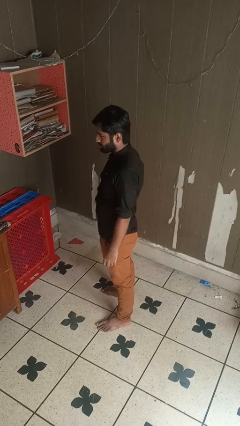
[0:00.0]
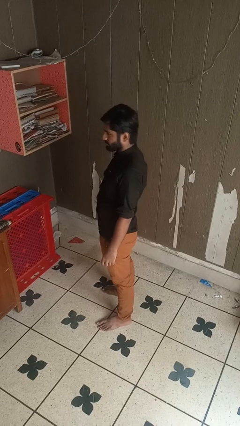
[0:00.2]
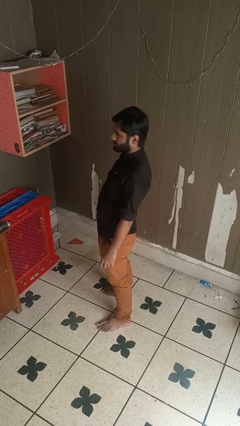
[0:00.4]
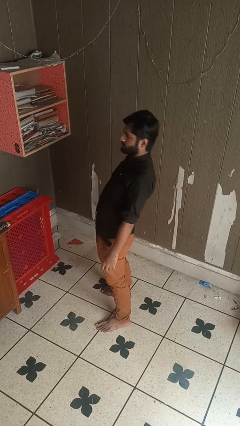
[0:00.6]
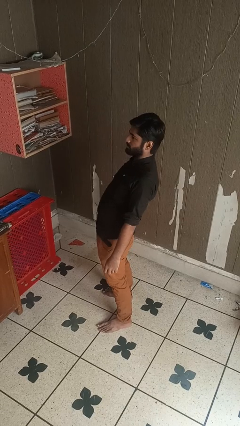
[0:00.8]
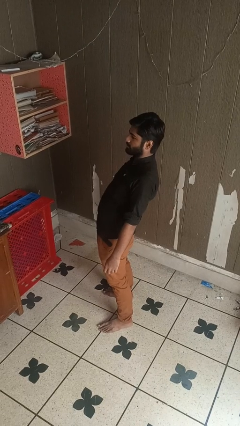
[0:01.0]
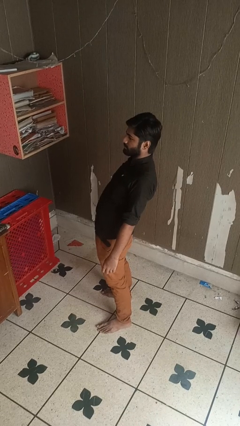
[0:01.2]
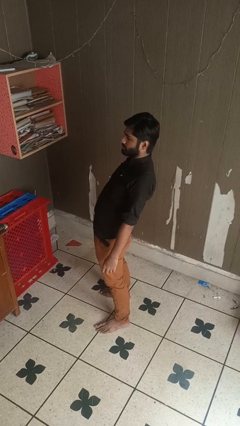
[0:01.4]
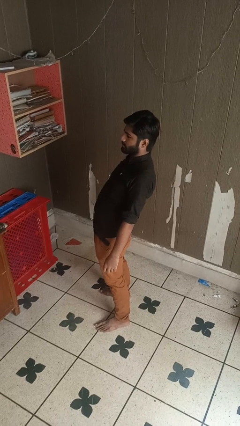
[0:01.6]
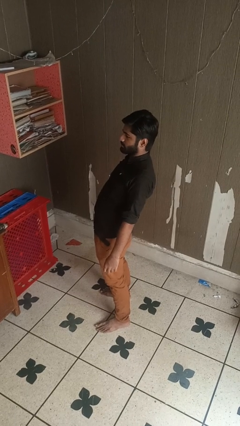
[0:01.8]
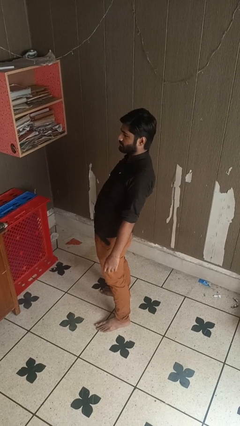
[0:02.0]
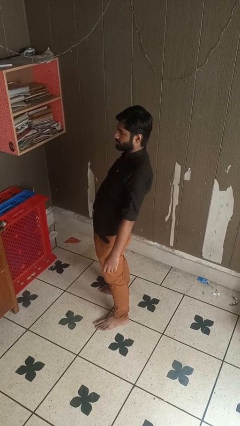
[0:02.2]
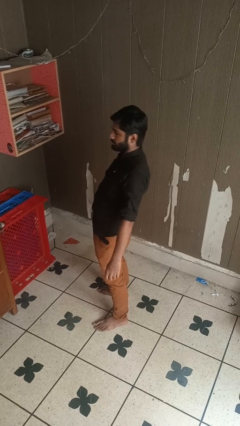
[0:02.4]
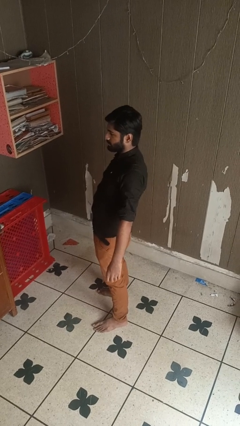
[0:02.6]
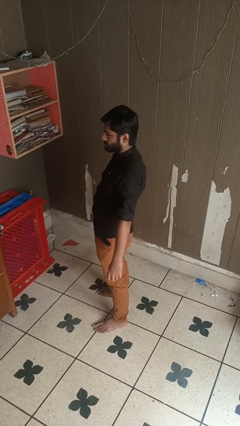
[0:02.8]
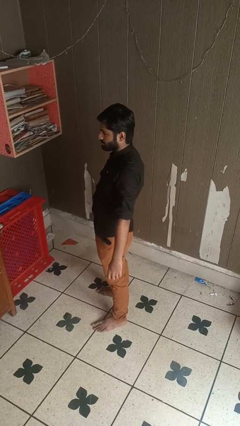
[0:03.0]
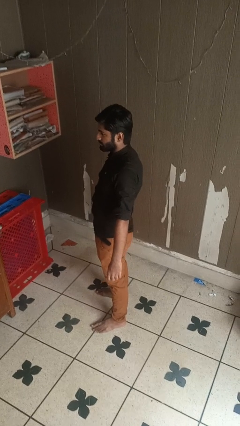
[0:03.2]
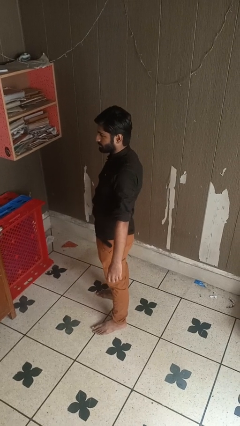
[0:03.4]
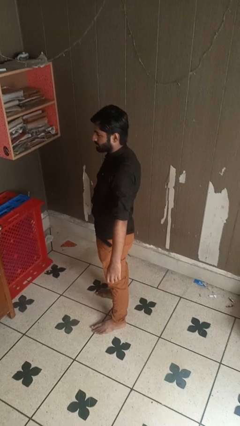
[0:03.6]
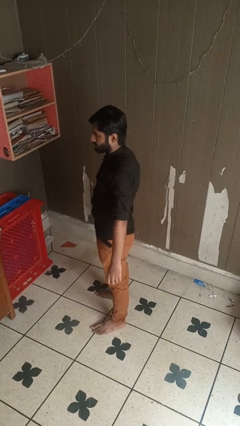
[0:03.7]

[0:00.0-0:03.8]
person stretches back

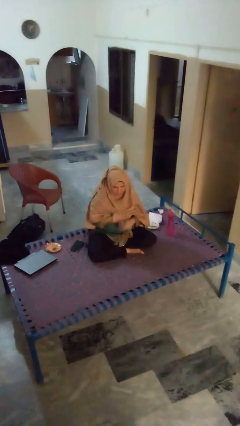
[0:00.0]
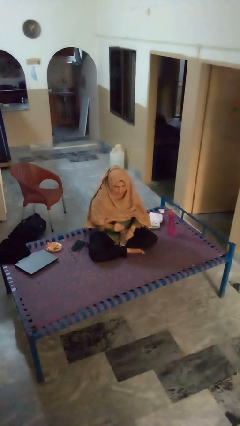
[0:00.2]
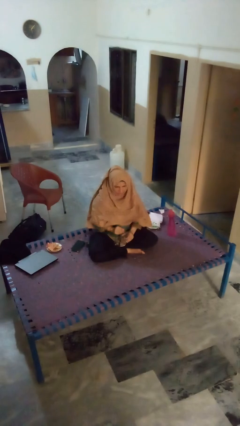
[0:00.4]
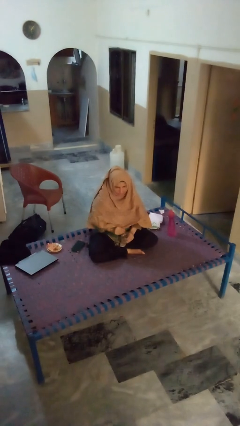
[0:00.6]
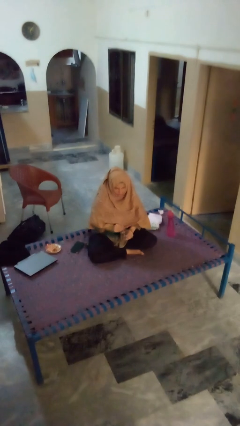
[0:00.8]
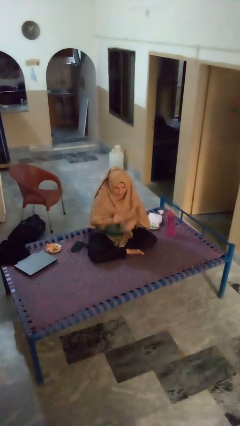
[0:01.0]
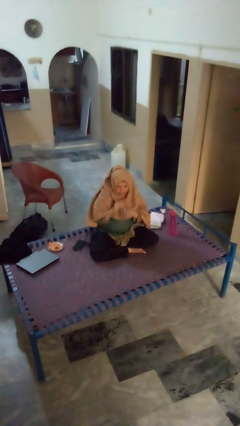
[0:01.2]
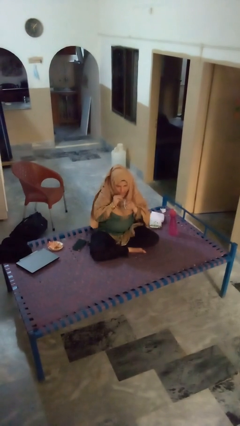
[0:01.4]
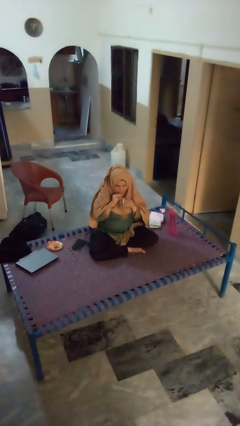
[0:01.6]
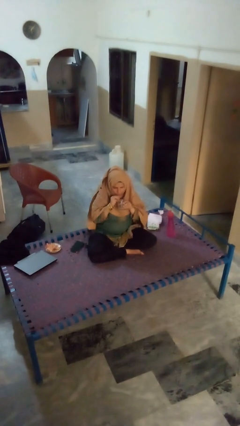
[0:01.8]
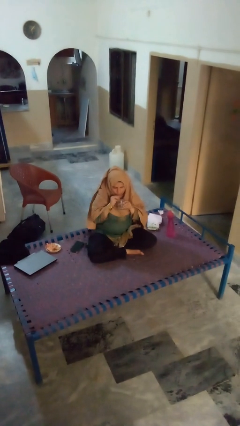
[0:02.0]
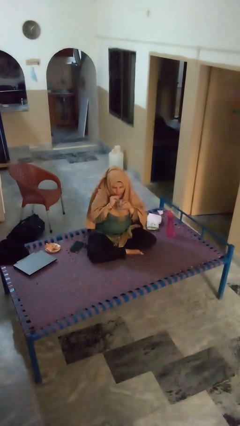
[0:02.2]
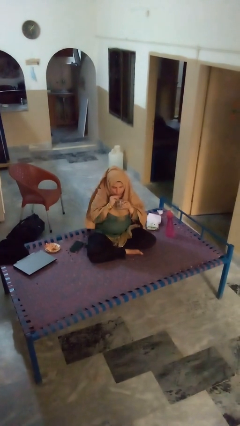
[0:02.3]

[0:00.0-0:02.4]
person drinks from straw

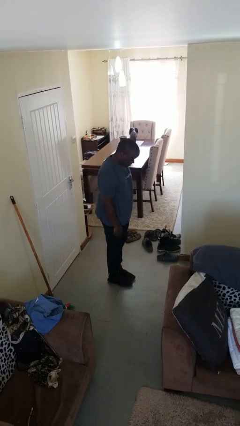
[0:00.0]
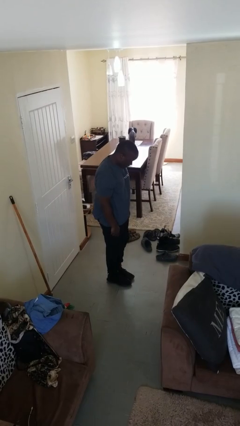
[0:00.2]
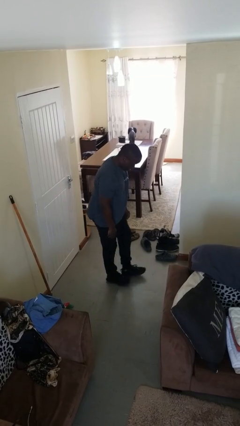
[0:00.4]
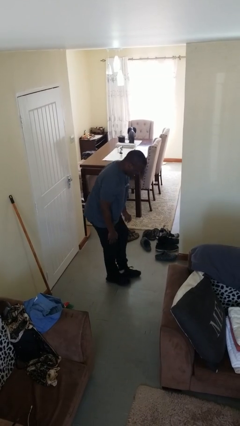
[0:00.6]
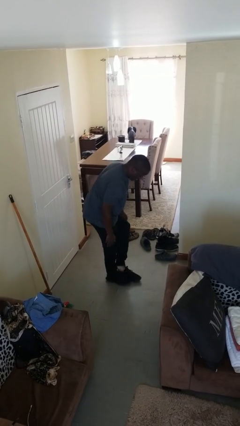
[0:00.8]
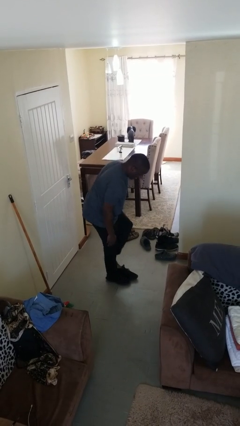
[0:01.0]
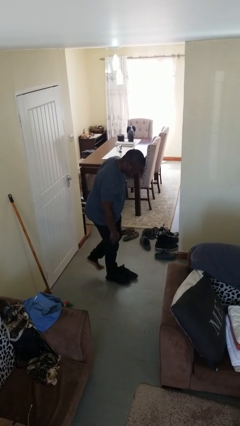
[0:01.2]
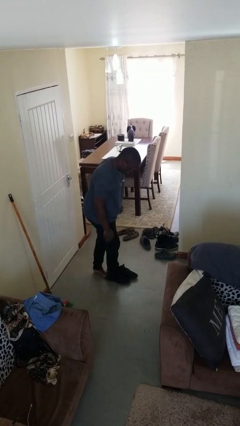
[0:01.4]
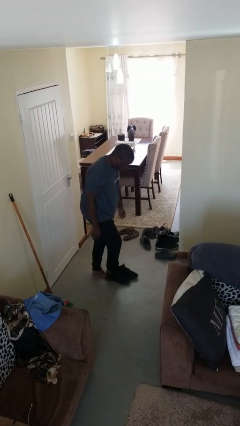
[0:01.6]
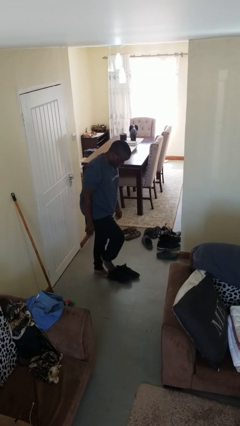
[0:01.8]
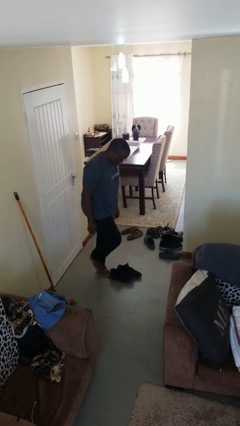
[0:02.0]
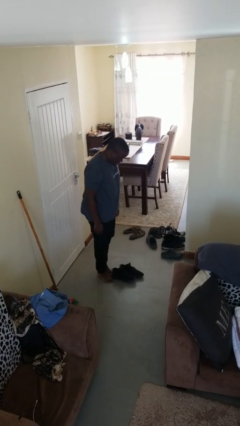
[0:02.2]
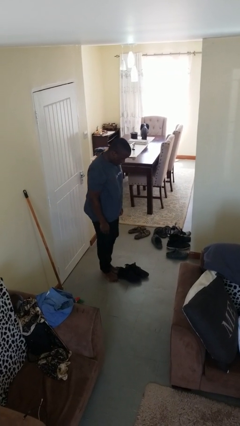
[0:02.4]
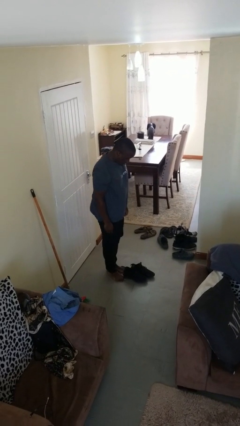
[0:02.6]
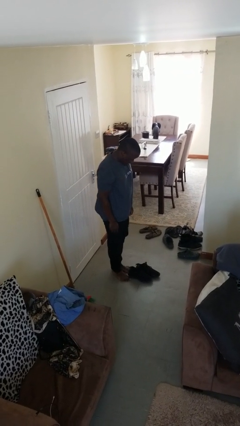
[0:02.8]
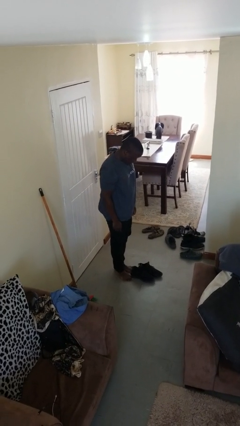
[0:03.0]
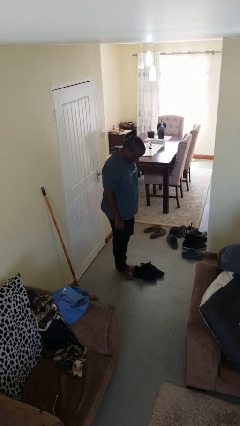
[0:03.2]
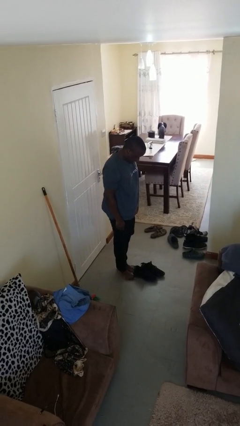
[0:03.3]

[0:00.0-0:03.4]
person takes off shoes

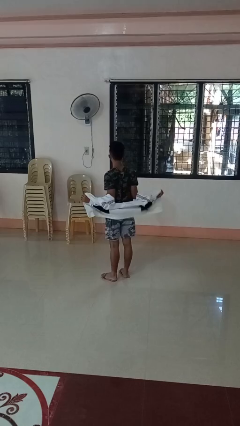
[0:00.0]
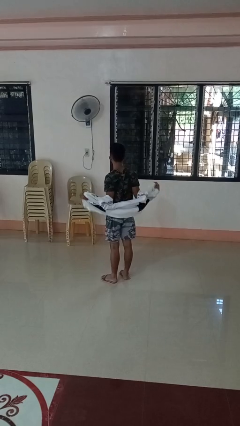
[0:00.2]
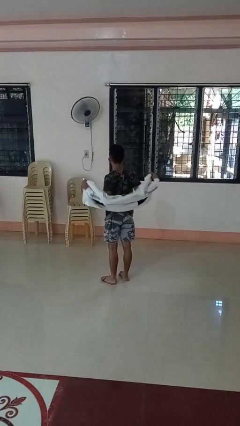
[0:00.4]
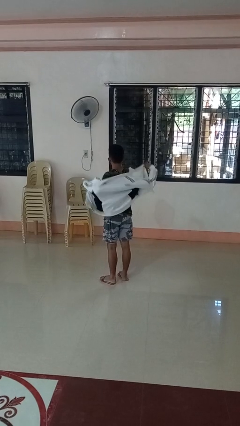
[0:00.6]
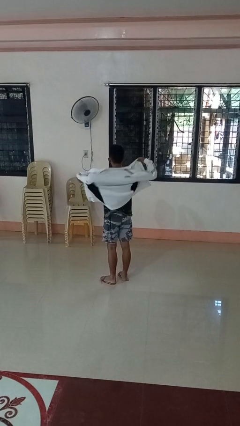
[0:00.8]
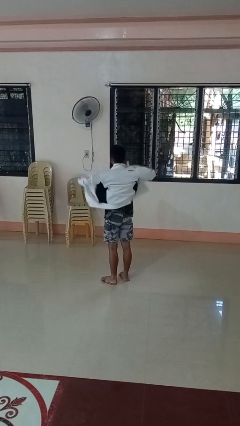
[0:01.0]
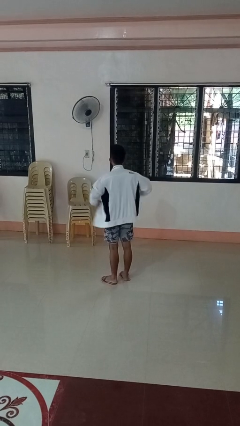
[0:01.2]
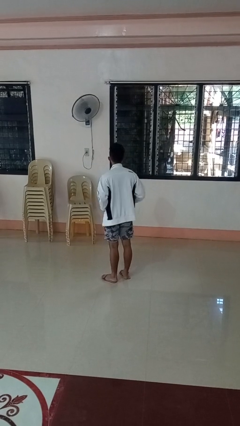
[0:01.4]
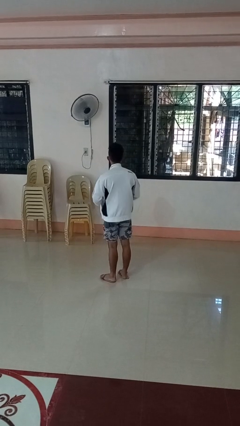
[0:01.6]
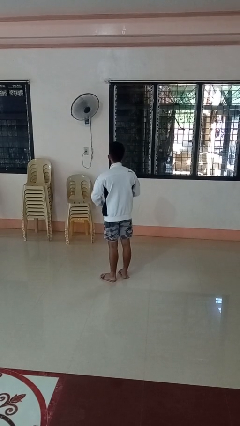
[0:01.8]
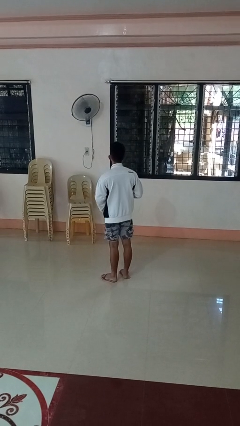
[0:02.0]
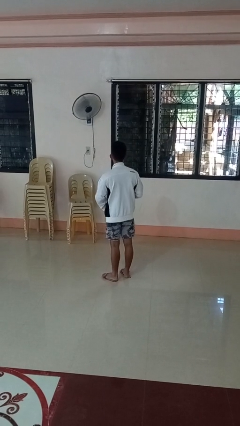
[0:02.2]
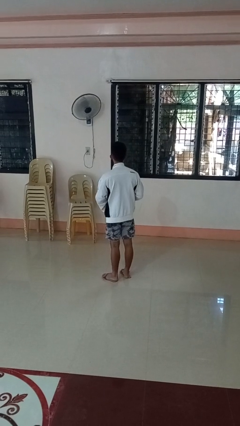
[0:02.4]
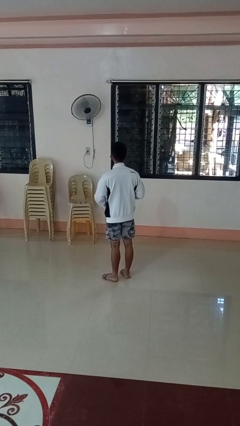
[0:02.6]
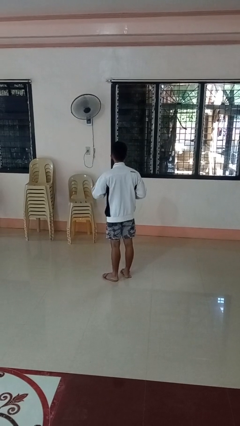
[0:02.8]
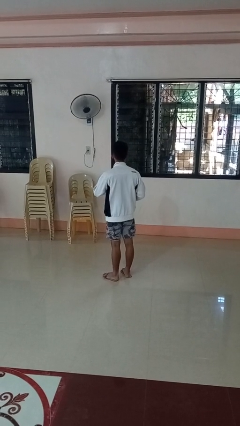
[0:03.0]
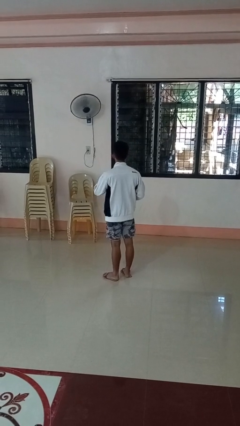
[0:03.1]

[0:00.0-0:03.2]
person puts on jacket

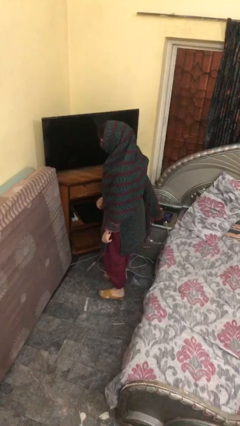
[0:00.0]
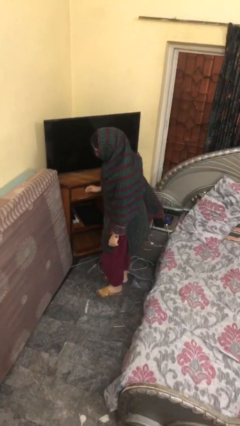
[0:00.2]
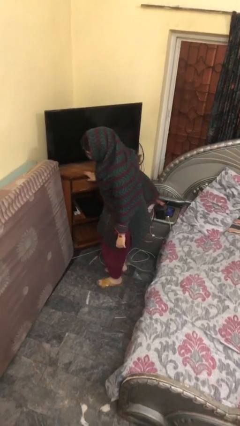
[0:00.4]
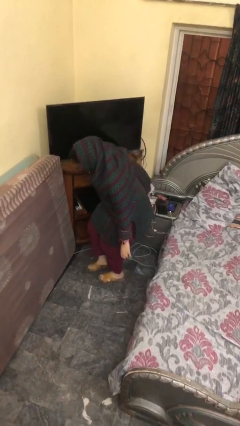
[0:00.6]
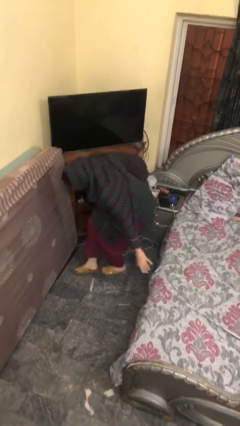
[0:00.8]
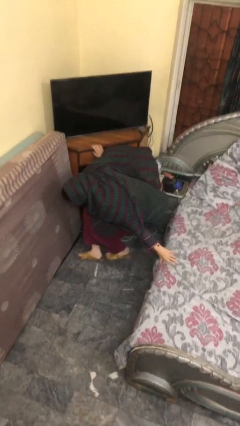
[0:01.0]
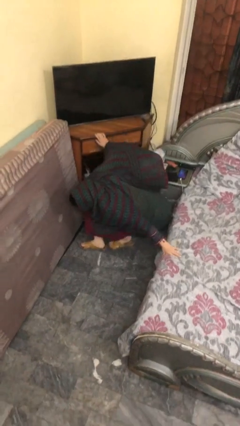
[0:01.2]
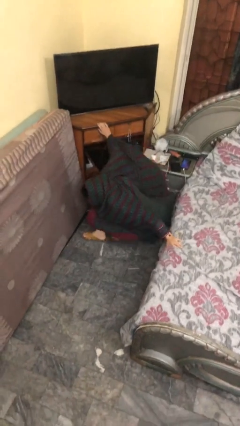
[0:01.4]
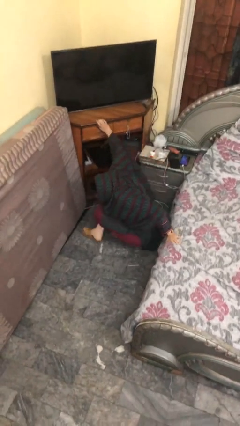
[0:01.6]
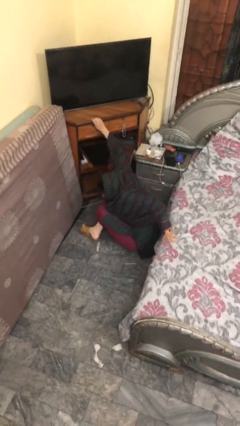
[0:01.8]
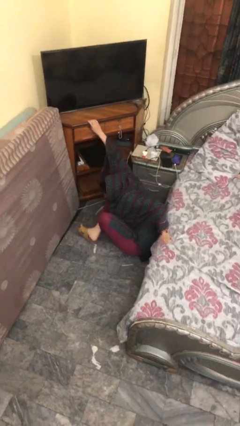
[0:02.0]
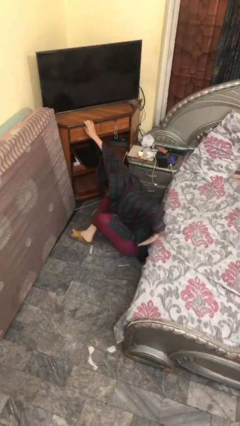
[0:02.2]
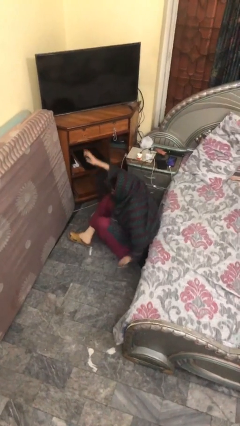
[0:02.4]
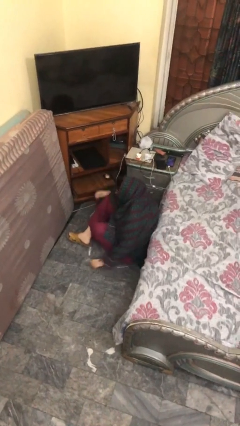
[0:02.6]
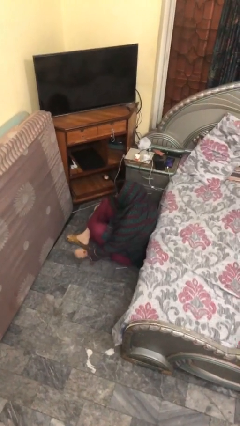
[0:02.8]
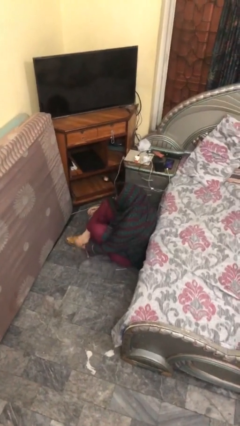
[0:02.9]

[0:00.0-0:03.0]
person sits crisscross

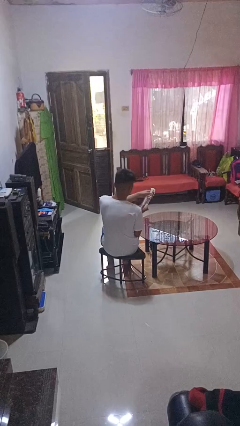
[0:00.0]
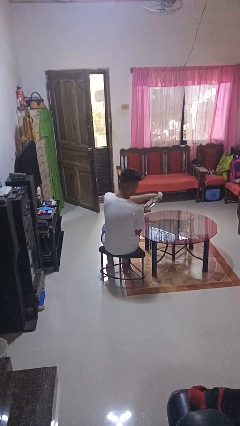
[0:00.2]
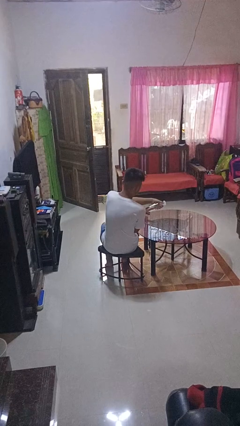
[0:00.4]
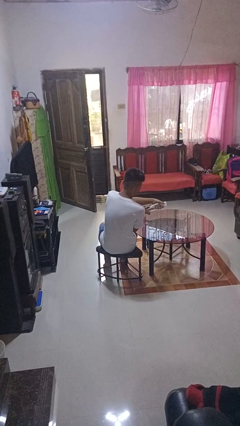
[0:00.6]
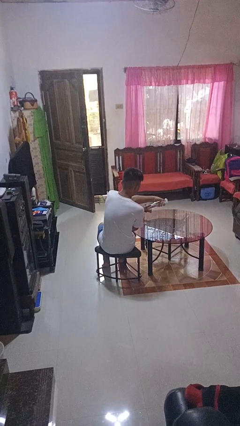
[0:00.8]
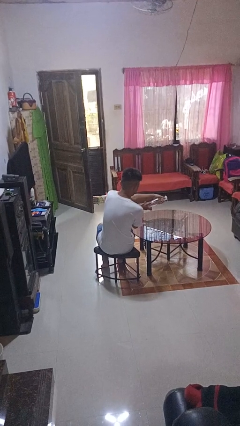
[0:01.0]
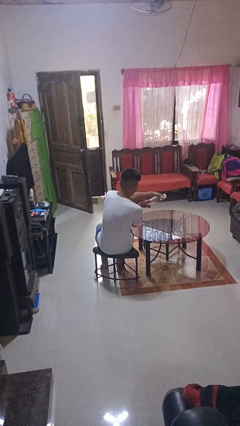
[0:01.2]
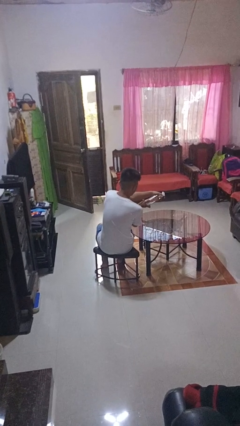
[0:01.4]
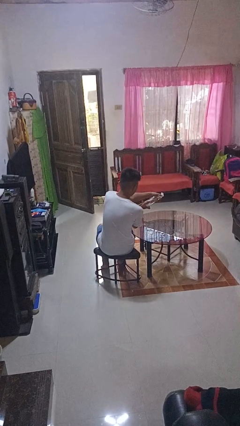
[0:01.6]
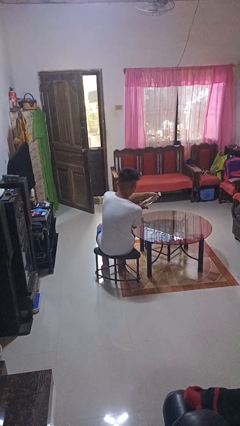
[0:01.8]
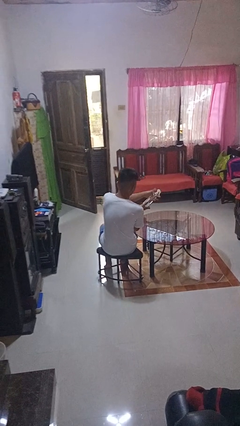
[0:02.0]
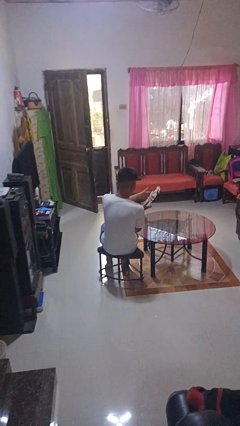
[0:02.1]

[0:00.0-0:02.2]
person sprays from bottle
